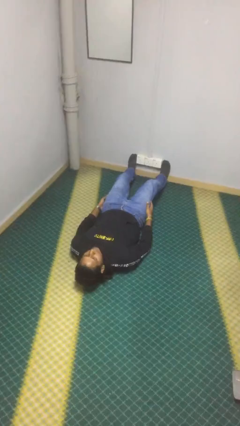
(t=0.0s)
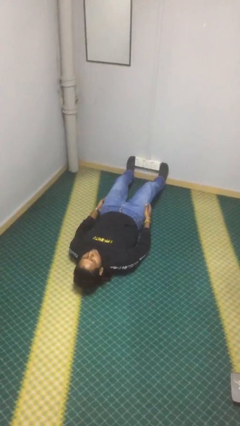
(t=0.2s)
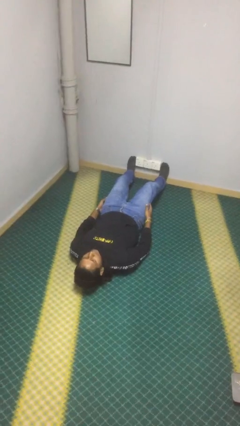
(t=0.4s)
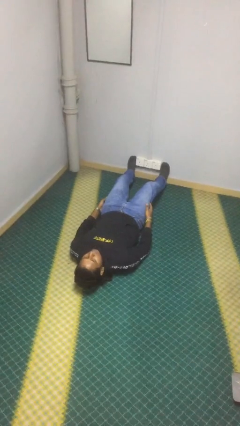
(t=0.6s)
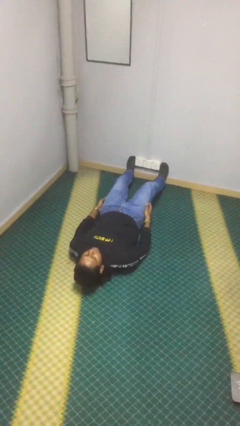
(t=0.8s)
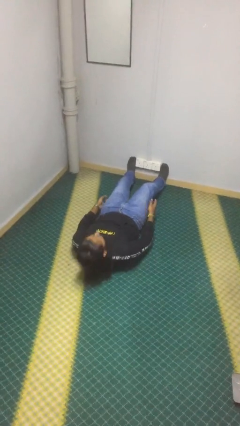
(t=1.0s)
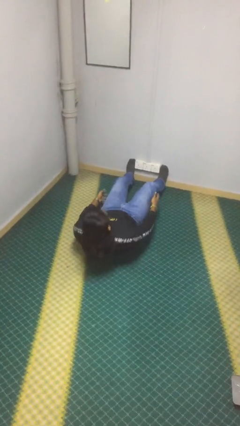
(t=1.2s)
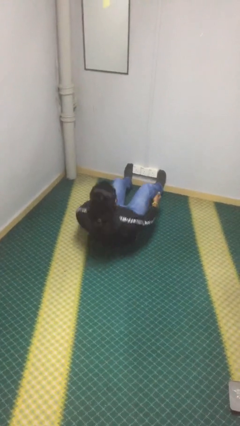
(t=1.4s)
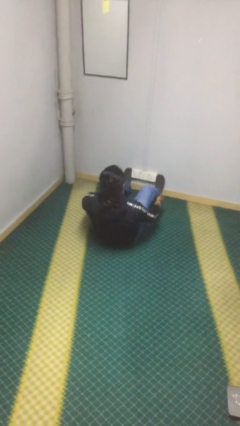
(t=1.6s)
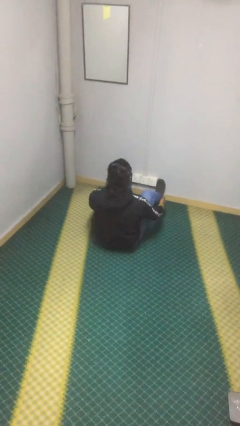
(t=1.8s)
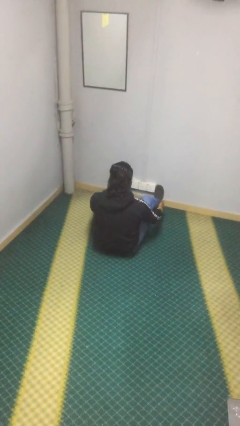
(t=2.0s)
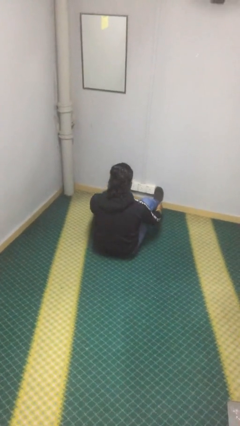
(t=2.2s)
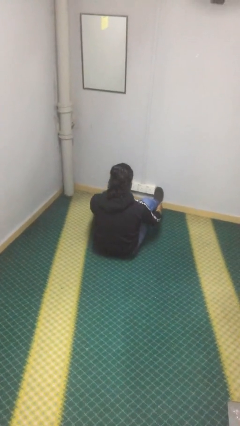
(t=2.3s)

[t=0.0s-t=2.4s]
person exercises with situp

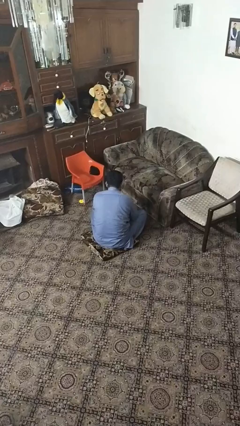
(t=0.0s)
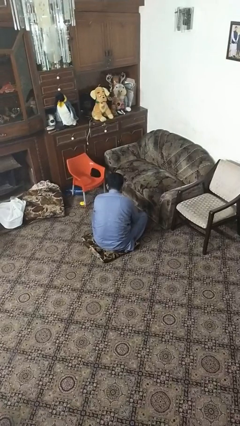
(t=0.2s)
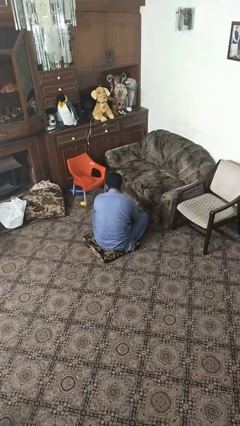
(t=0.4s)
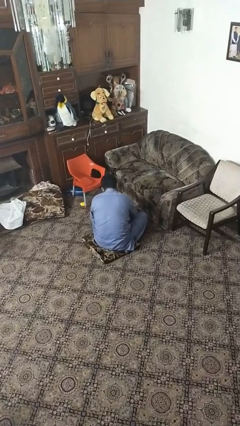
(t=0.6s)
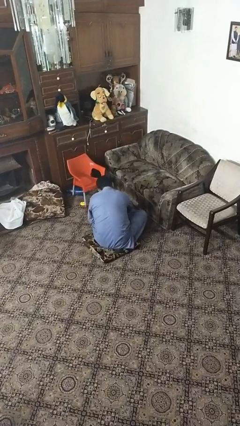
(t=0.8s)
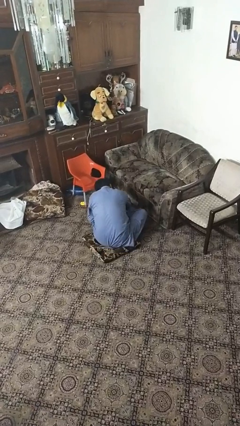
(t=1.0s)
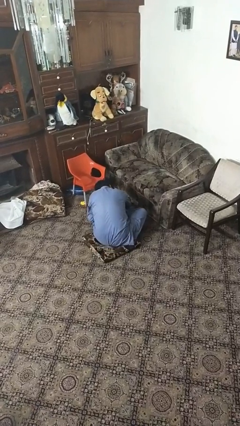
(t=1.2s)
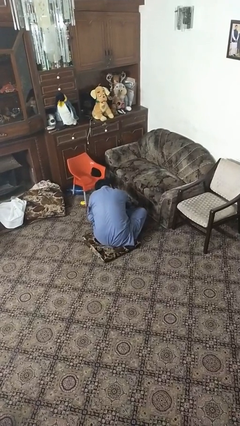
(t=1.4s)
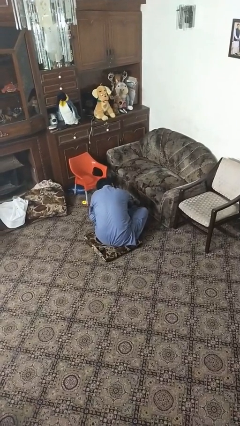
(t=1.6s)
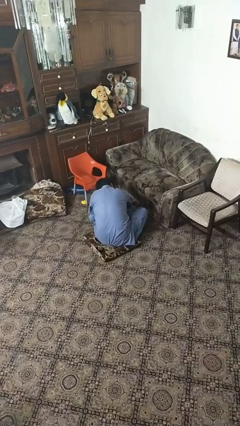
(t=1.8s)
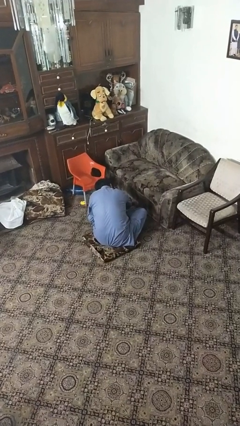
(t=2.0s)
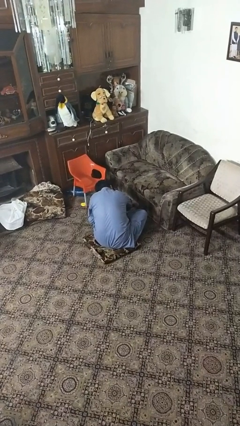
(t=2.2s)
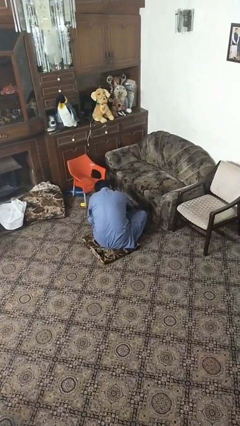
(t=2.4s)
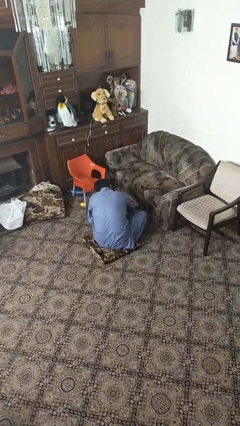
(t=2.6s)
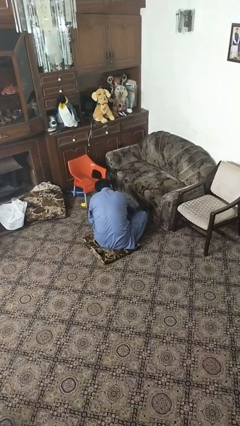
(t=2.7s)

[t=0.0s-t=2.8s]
person searches under couch

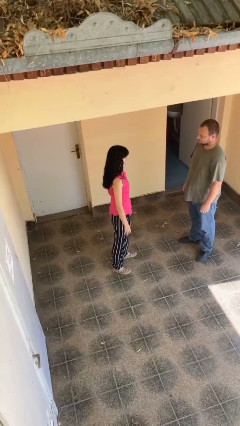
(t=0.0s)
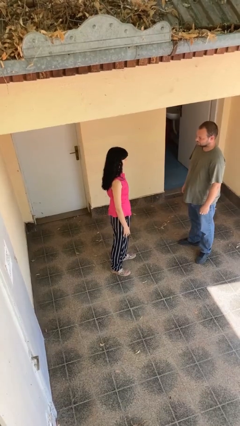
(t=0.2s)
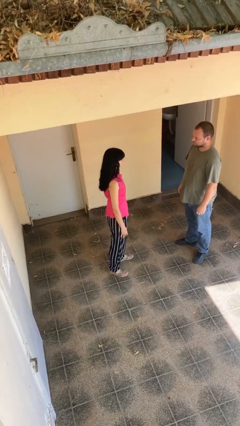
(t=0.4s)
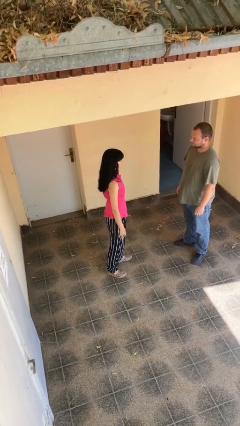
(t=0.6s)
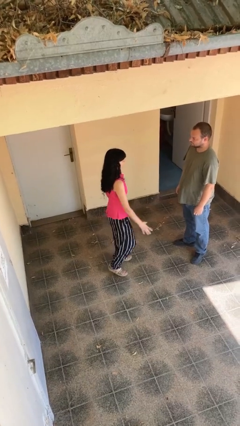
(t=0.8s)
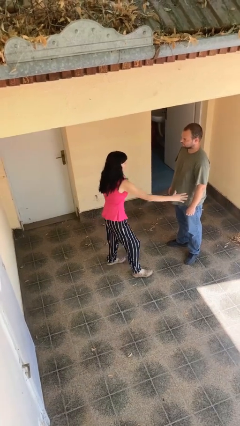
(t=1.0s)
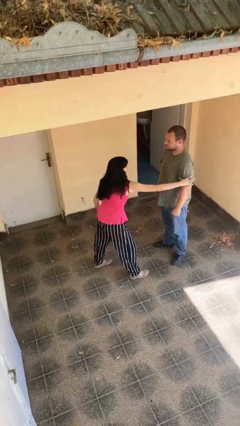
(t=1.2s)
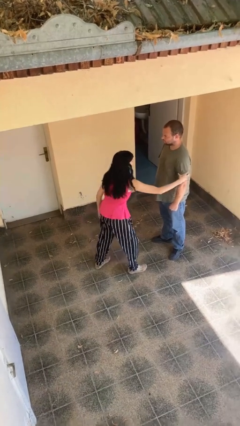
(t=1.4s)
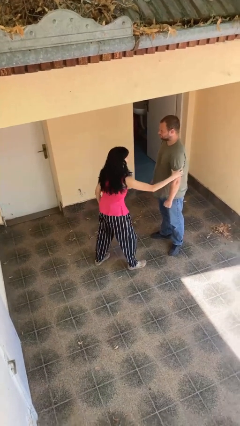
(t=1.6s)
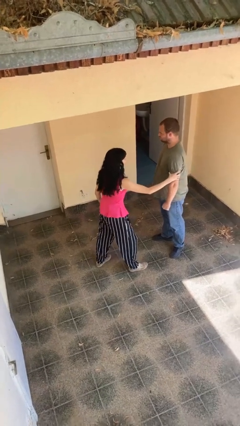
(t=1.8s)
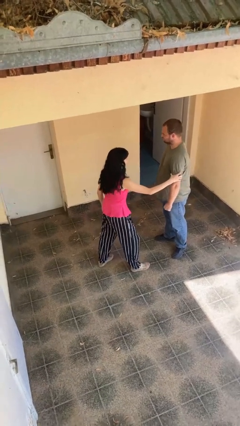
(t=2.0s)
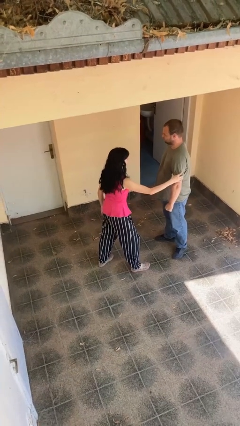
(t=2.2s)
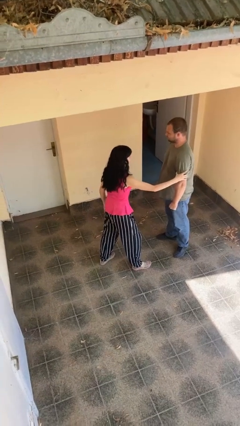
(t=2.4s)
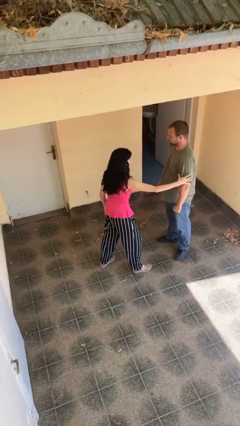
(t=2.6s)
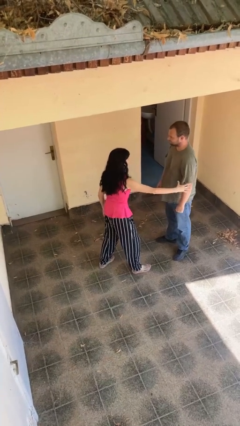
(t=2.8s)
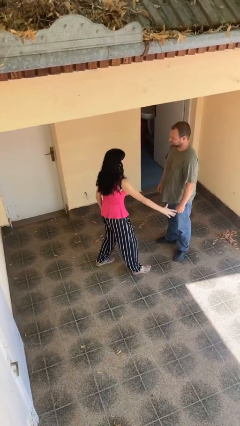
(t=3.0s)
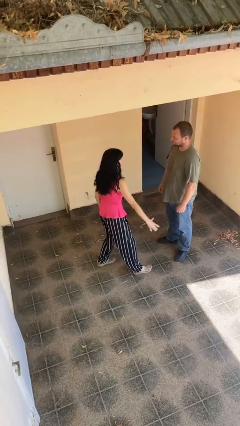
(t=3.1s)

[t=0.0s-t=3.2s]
person grabs person by bicep

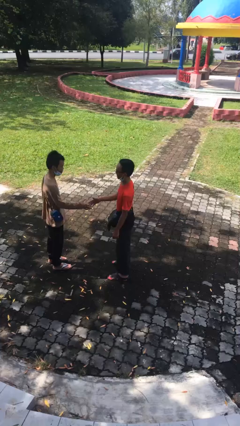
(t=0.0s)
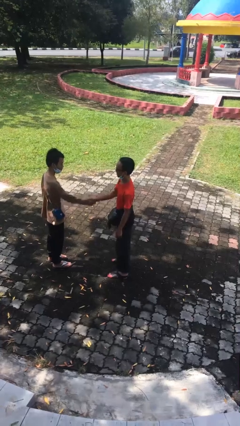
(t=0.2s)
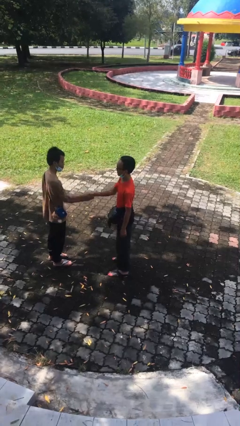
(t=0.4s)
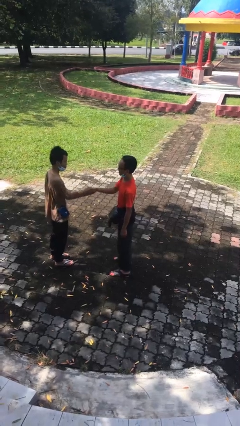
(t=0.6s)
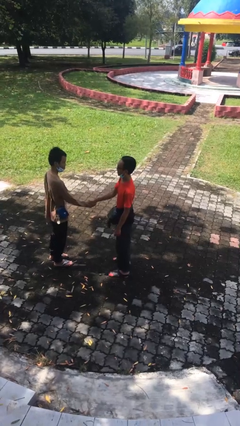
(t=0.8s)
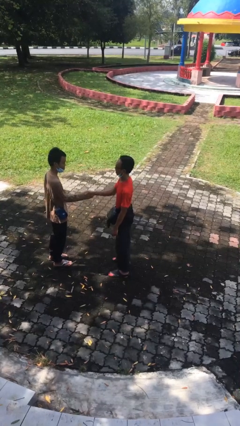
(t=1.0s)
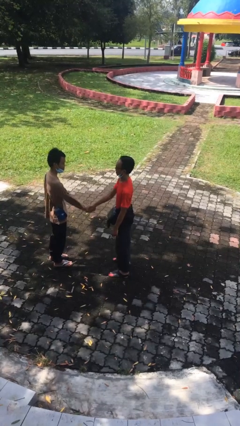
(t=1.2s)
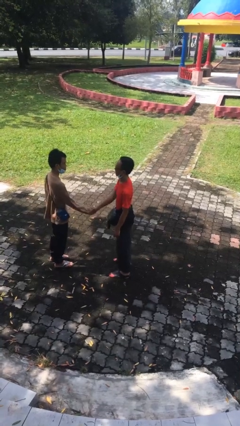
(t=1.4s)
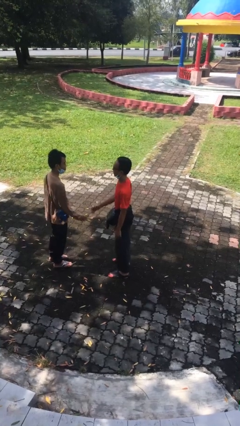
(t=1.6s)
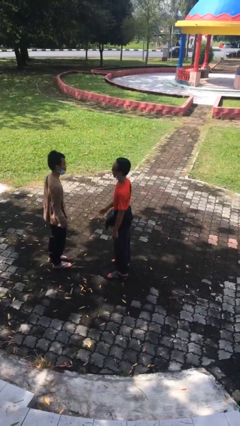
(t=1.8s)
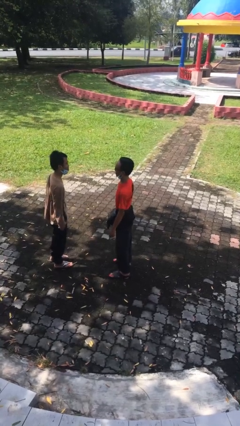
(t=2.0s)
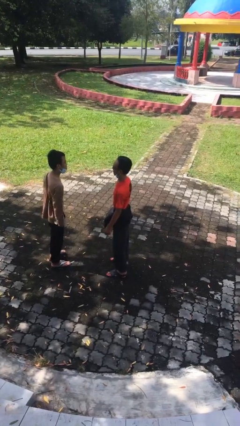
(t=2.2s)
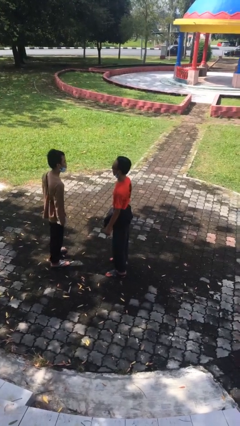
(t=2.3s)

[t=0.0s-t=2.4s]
person shakes hand

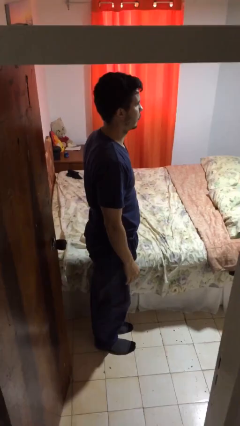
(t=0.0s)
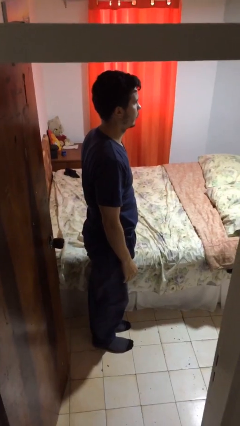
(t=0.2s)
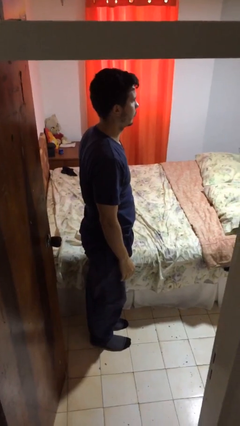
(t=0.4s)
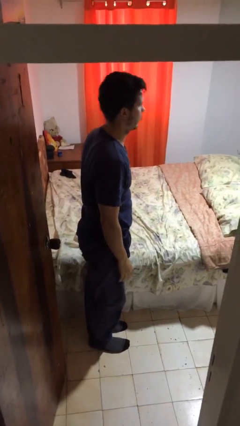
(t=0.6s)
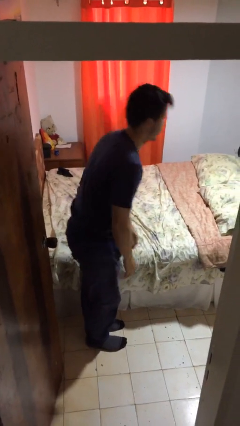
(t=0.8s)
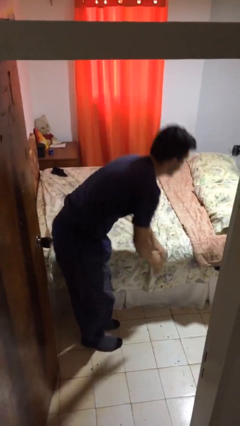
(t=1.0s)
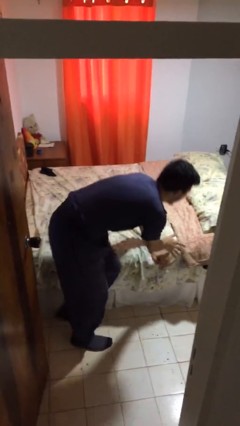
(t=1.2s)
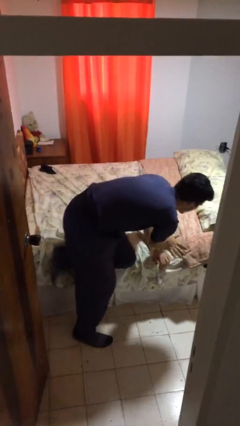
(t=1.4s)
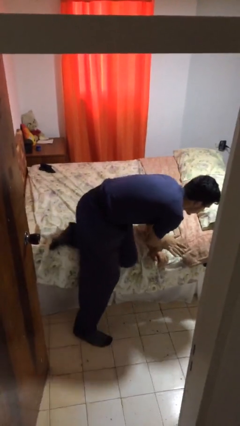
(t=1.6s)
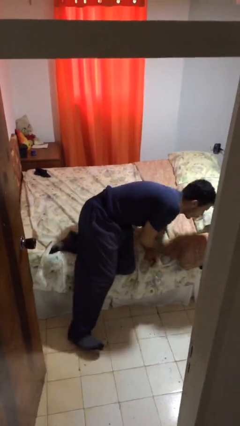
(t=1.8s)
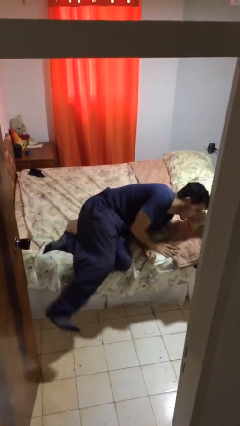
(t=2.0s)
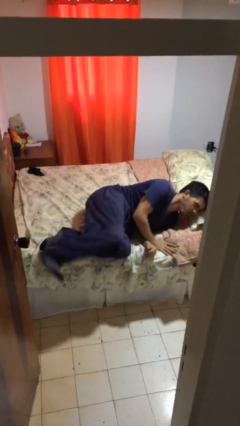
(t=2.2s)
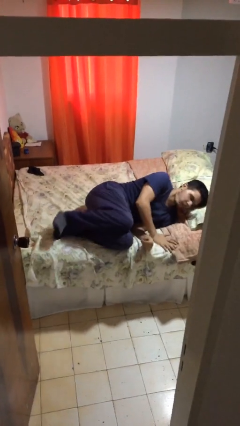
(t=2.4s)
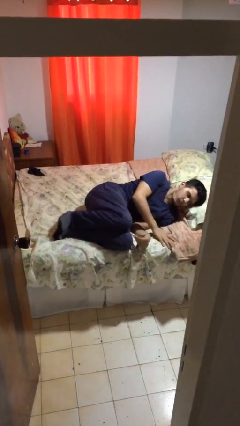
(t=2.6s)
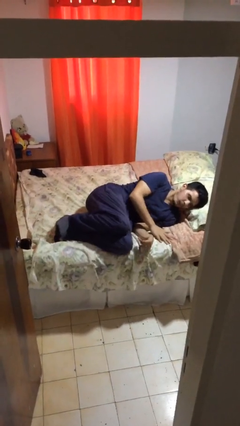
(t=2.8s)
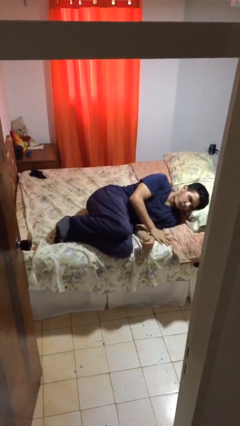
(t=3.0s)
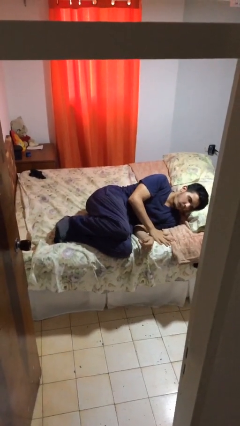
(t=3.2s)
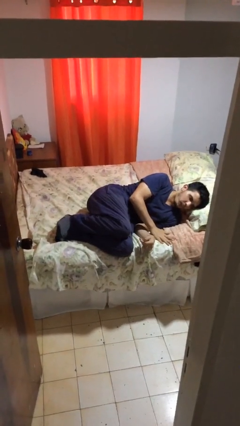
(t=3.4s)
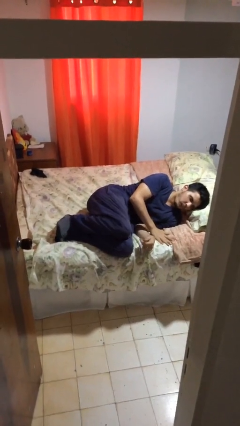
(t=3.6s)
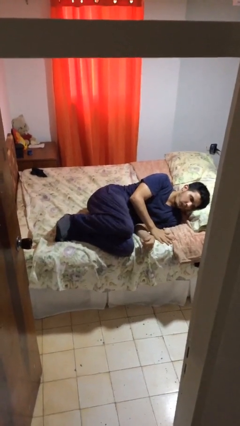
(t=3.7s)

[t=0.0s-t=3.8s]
person lies down on bed

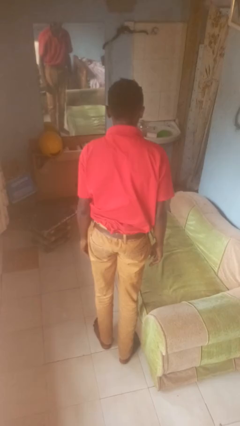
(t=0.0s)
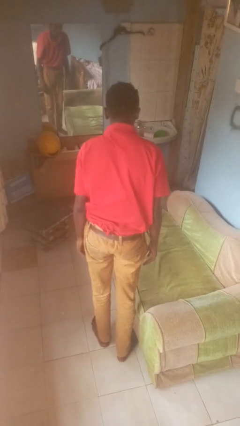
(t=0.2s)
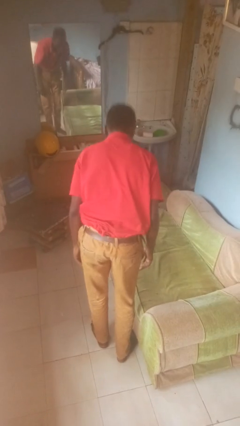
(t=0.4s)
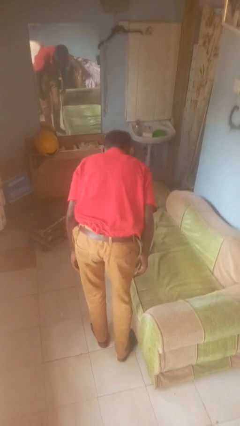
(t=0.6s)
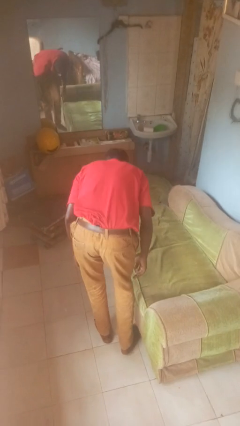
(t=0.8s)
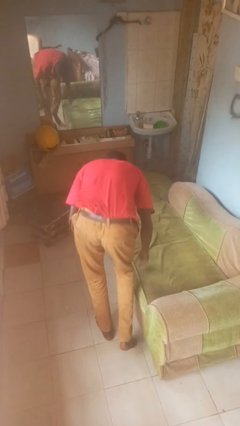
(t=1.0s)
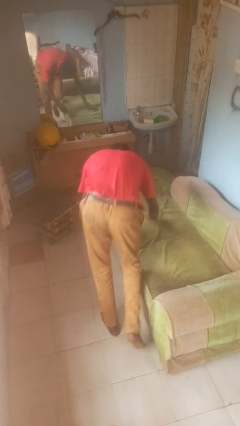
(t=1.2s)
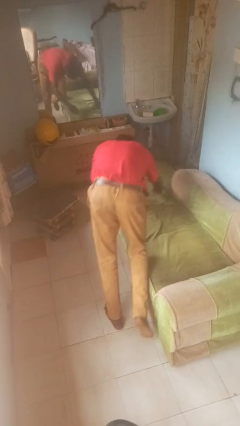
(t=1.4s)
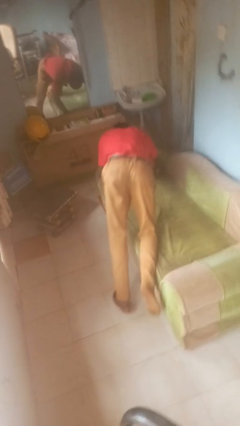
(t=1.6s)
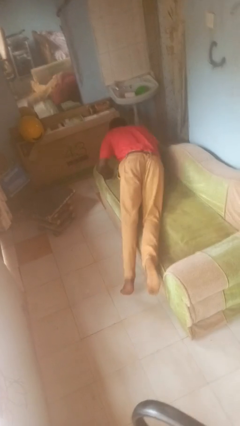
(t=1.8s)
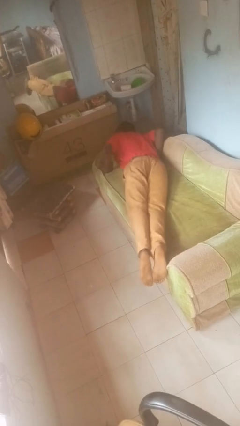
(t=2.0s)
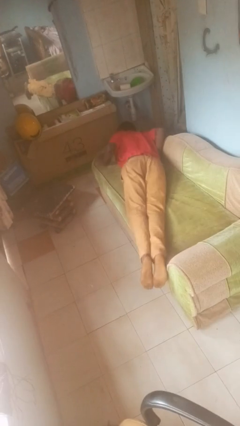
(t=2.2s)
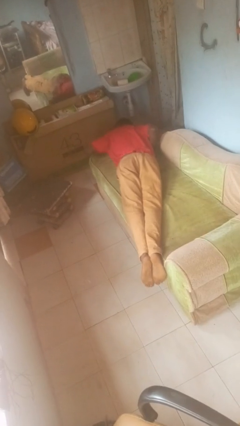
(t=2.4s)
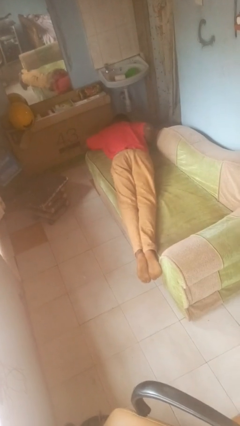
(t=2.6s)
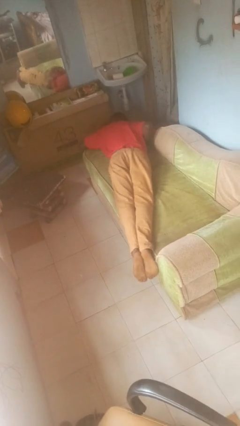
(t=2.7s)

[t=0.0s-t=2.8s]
person lies down on couch
